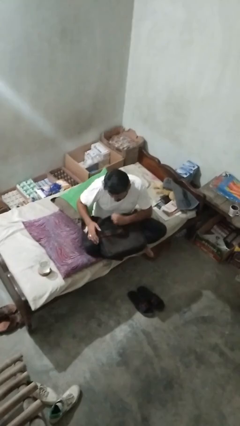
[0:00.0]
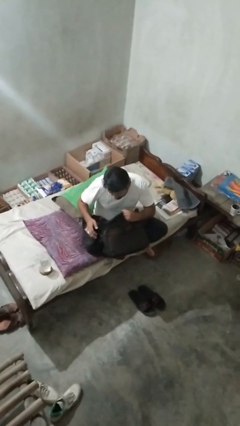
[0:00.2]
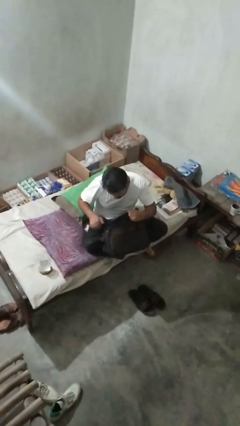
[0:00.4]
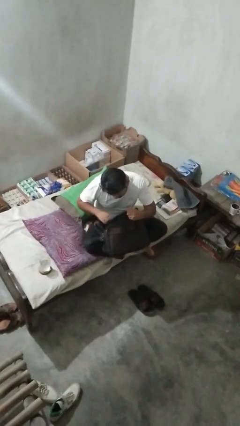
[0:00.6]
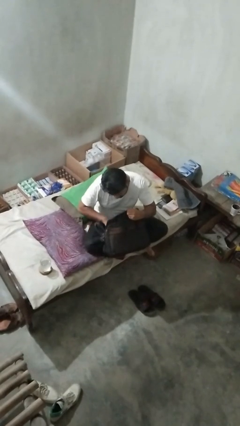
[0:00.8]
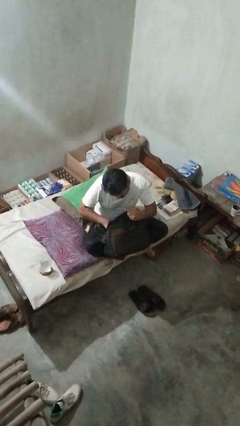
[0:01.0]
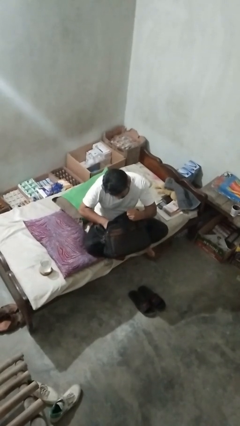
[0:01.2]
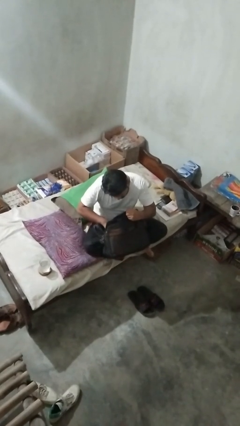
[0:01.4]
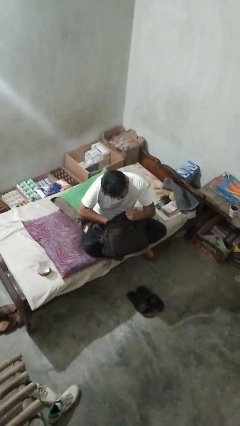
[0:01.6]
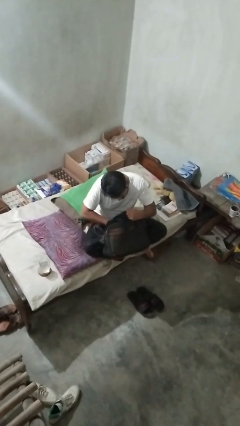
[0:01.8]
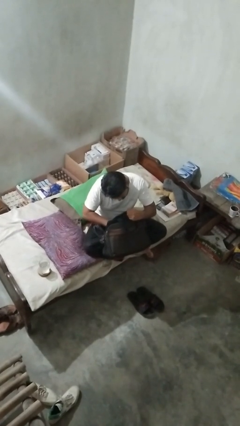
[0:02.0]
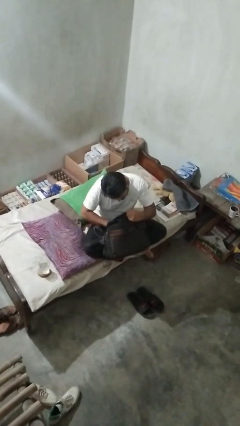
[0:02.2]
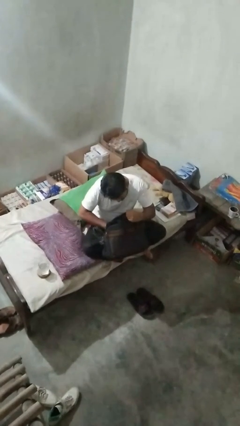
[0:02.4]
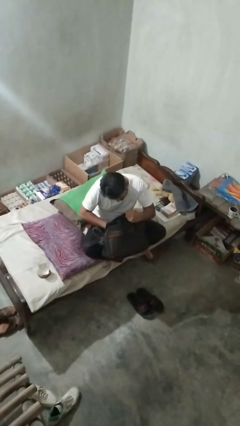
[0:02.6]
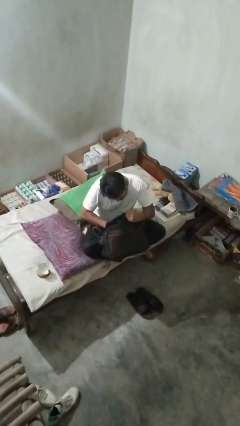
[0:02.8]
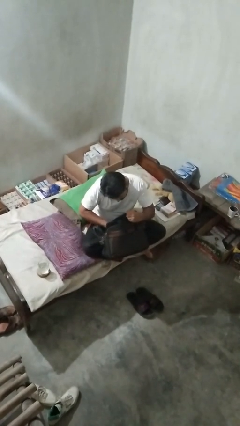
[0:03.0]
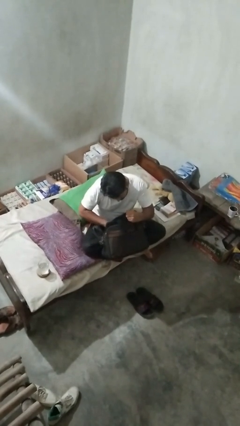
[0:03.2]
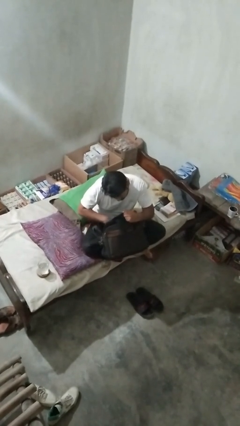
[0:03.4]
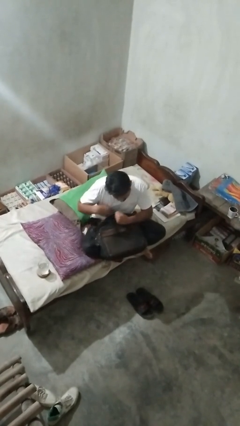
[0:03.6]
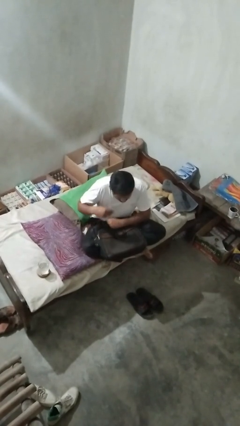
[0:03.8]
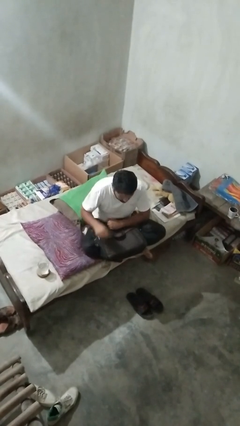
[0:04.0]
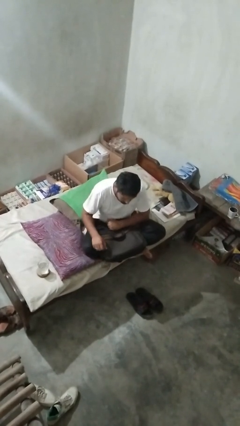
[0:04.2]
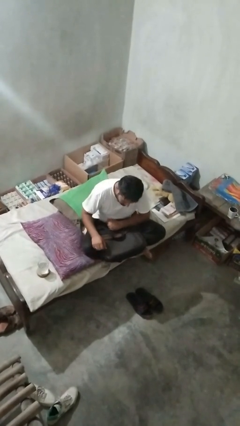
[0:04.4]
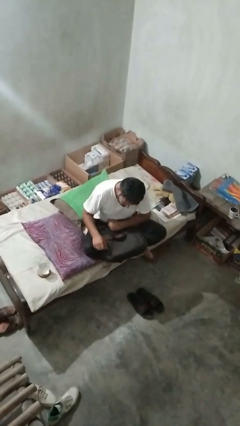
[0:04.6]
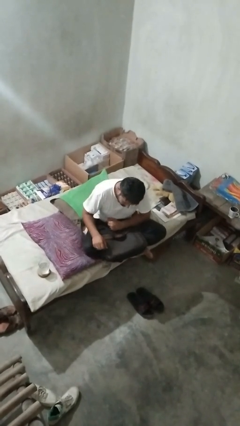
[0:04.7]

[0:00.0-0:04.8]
person searches in bag

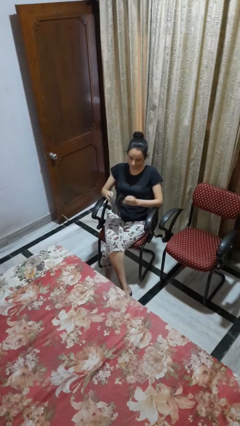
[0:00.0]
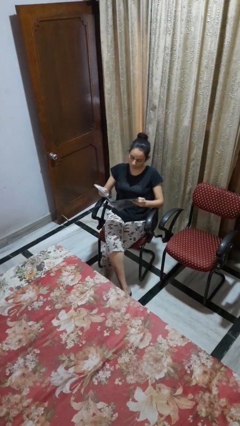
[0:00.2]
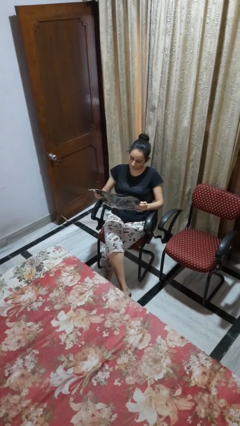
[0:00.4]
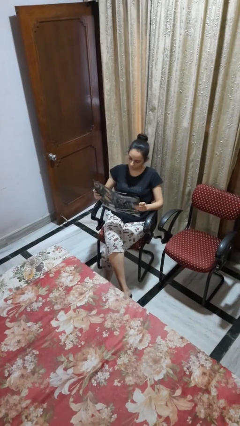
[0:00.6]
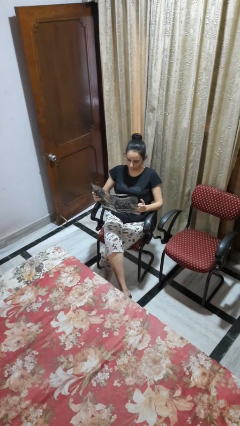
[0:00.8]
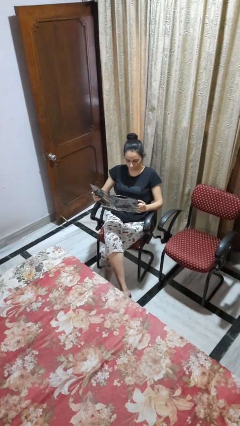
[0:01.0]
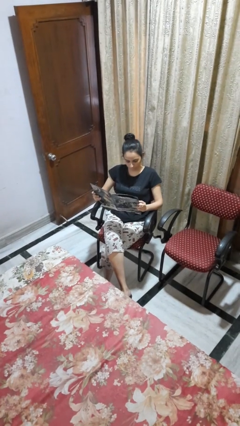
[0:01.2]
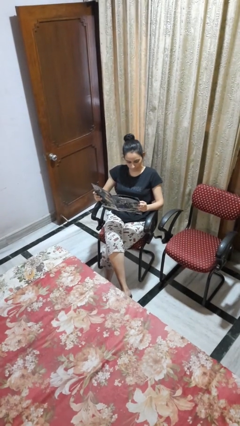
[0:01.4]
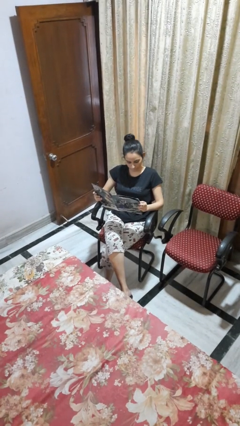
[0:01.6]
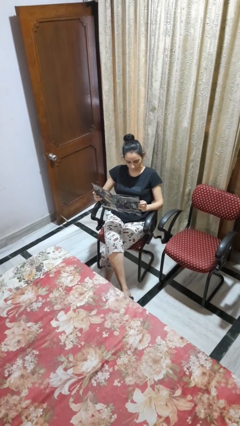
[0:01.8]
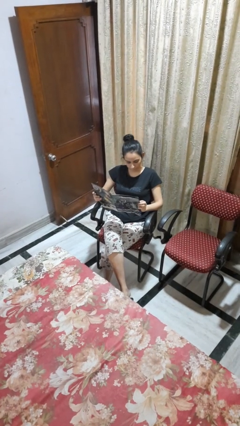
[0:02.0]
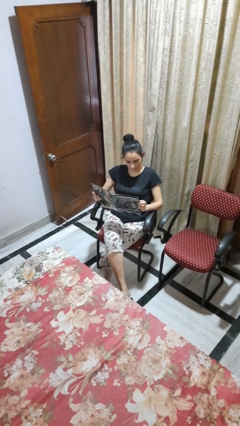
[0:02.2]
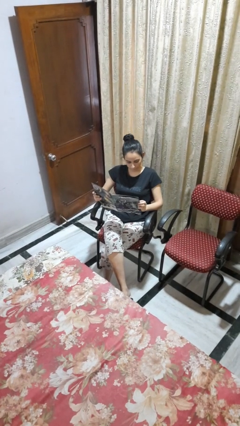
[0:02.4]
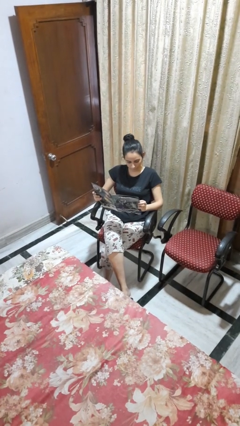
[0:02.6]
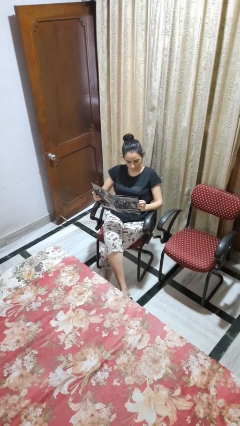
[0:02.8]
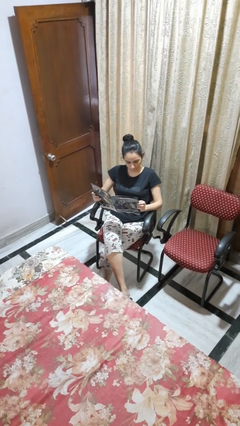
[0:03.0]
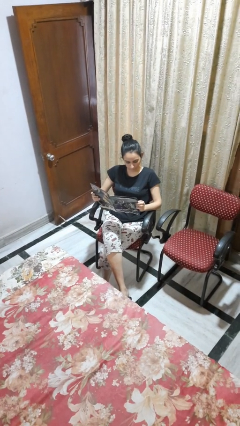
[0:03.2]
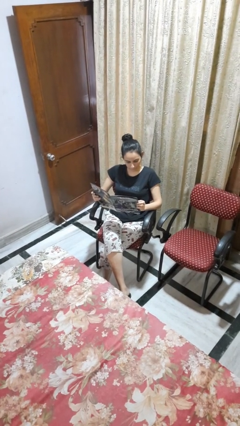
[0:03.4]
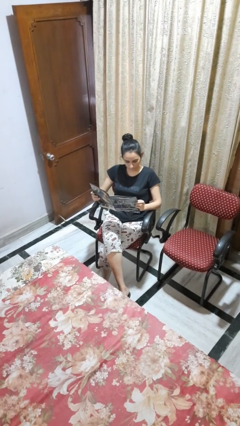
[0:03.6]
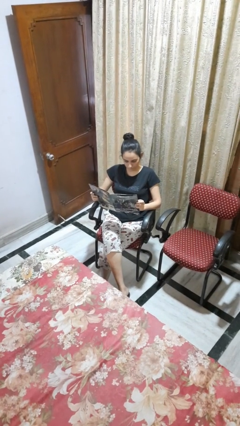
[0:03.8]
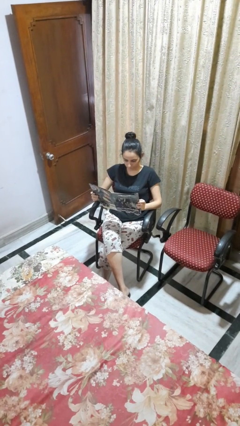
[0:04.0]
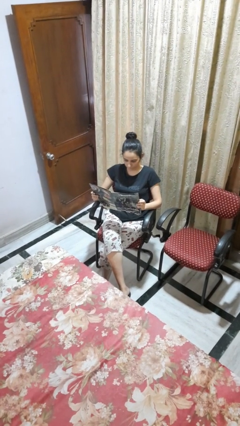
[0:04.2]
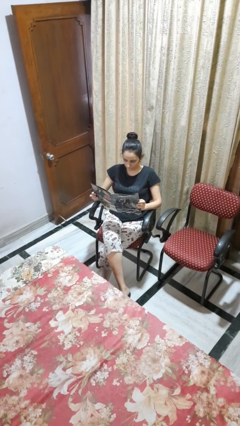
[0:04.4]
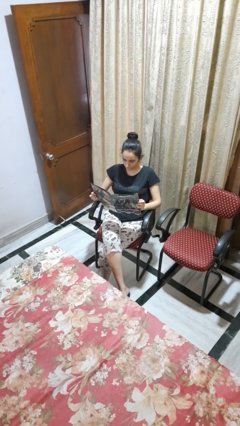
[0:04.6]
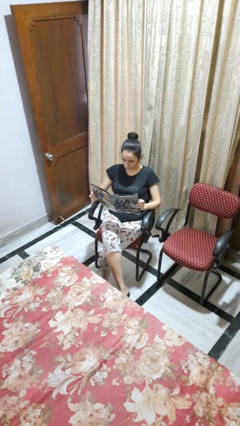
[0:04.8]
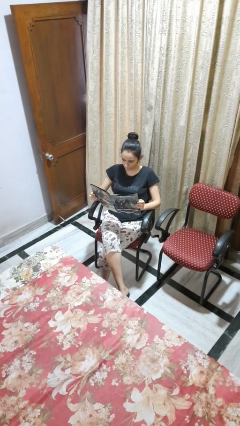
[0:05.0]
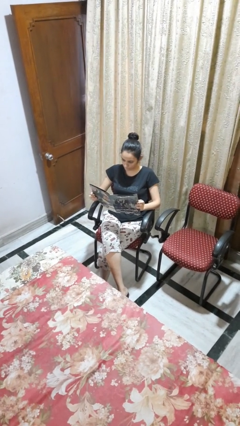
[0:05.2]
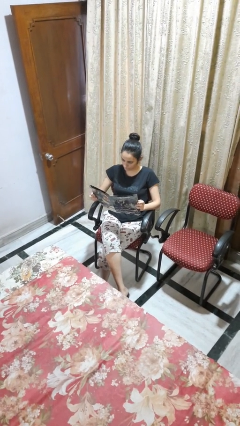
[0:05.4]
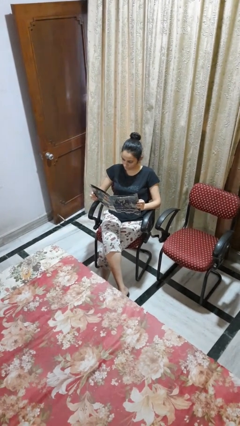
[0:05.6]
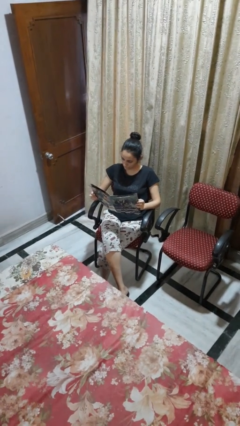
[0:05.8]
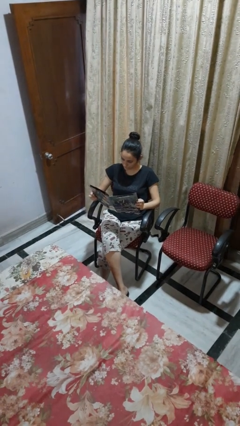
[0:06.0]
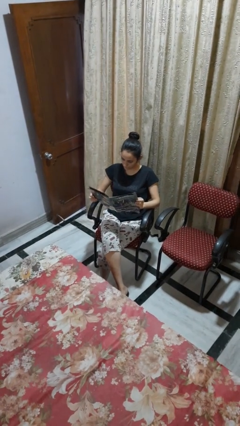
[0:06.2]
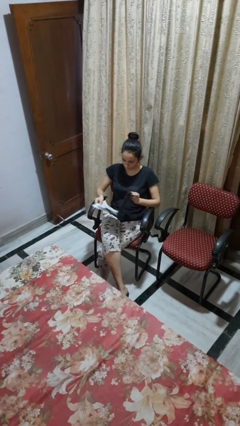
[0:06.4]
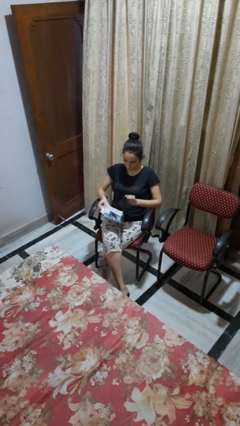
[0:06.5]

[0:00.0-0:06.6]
person reads magazine

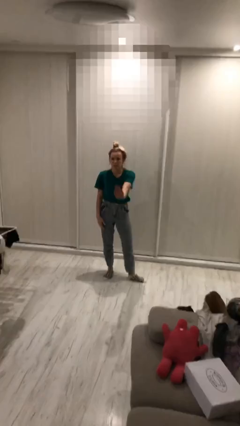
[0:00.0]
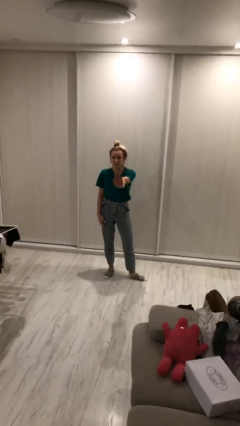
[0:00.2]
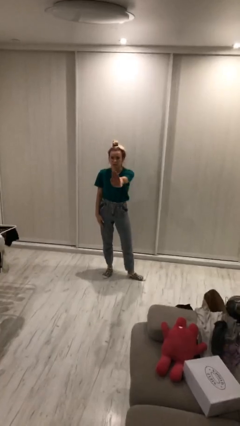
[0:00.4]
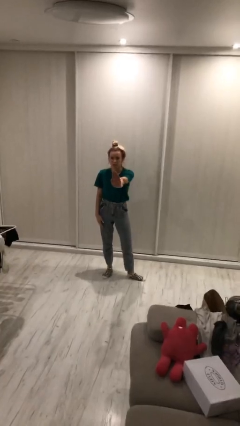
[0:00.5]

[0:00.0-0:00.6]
person gestures stop

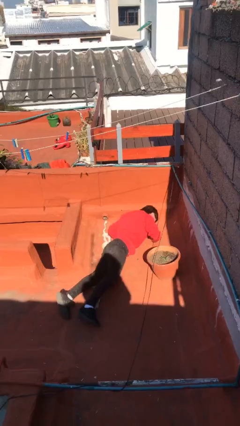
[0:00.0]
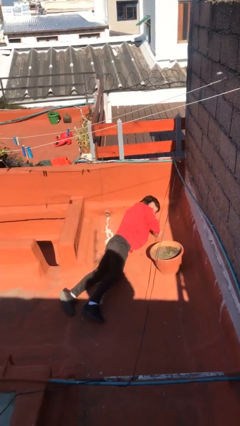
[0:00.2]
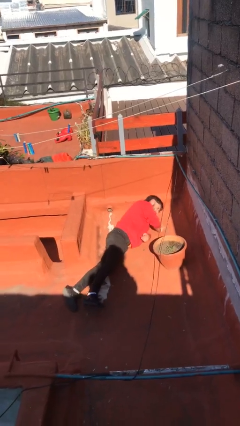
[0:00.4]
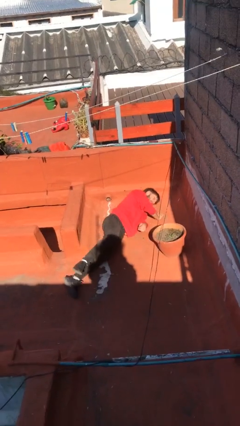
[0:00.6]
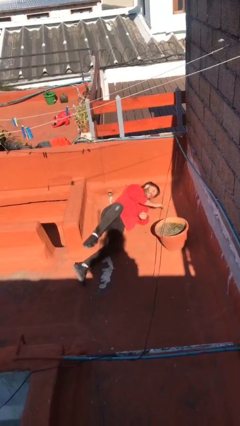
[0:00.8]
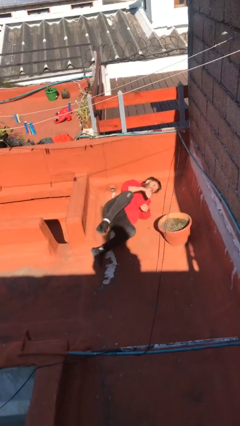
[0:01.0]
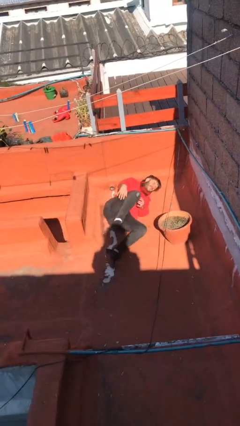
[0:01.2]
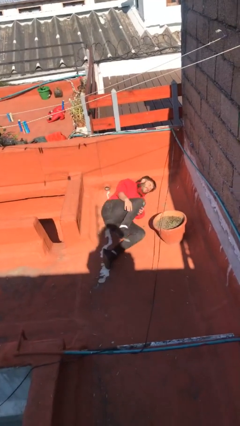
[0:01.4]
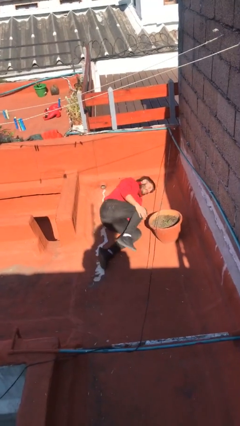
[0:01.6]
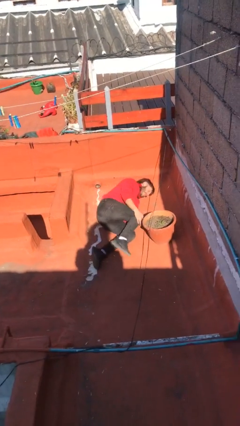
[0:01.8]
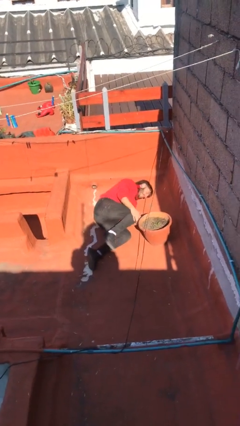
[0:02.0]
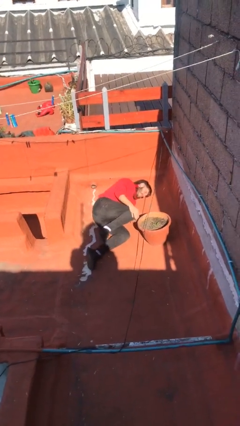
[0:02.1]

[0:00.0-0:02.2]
person lies down on floor

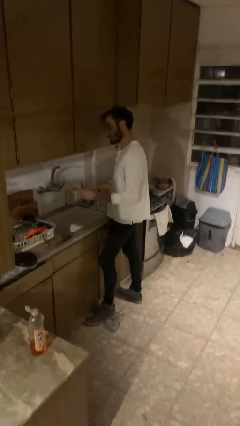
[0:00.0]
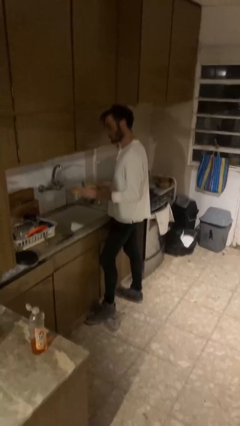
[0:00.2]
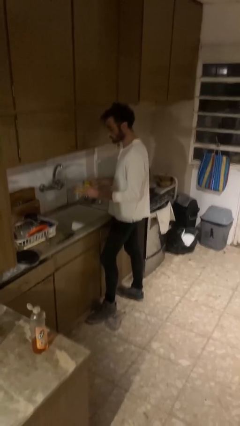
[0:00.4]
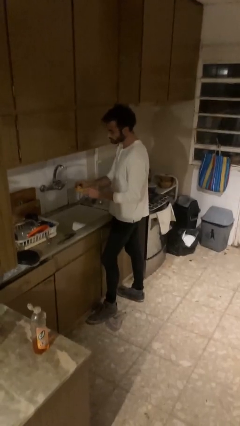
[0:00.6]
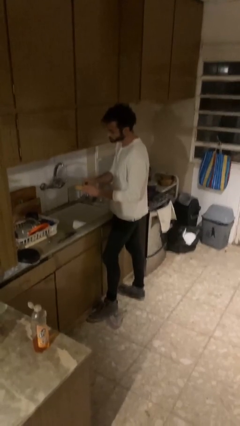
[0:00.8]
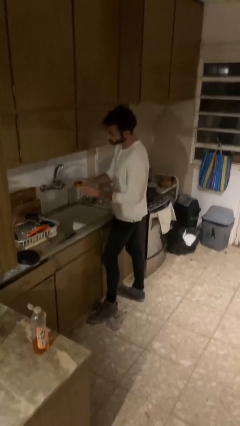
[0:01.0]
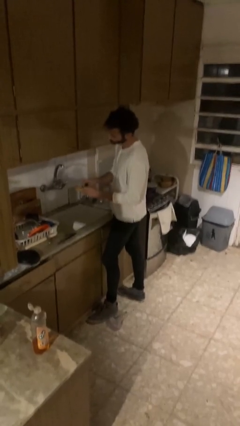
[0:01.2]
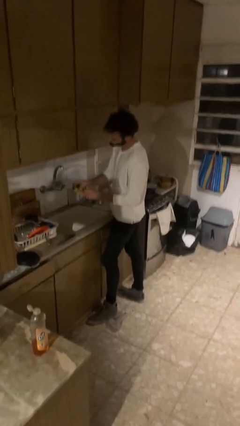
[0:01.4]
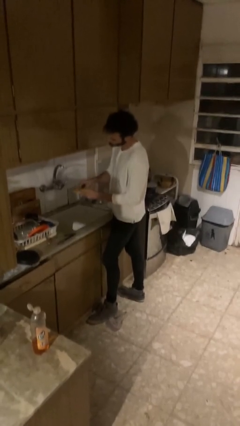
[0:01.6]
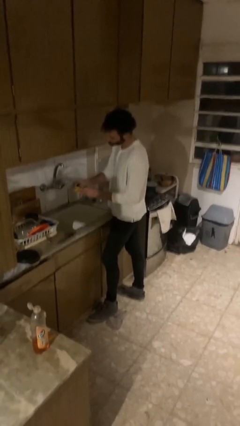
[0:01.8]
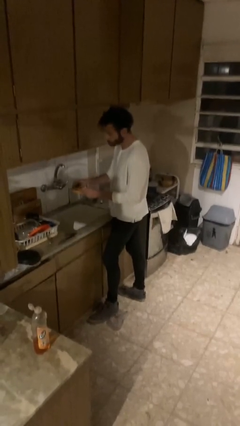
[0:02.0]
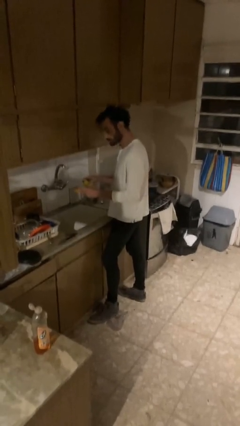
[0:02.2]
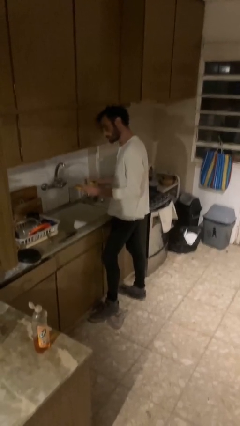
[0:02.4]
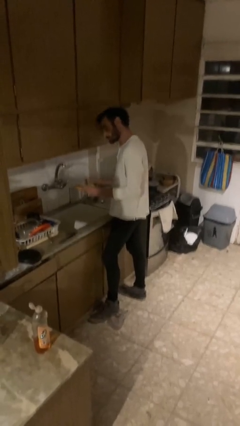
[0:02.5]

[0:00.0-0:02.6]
person washes dish

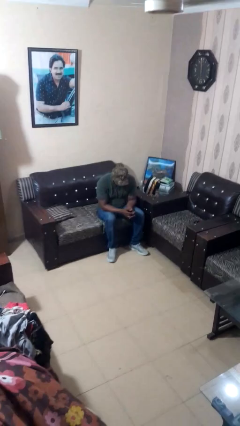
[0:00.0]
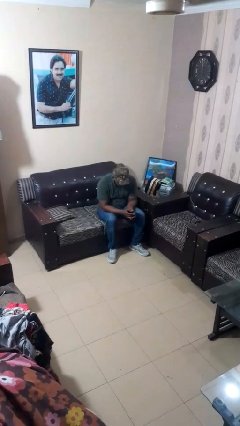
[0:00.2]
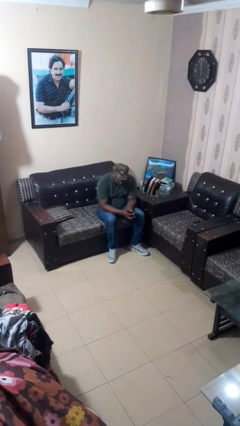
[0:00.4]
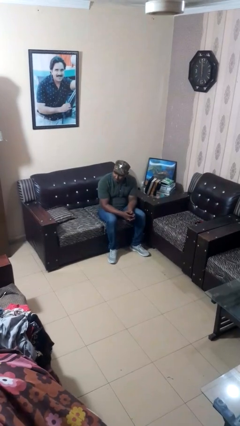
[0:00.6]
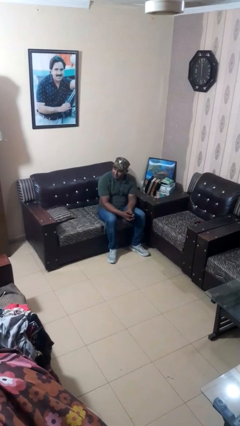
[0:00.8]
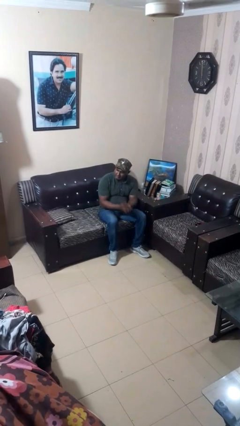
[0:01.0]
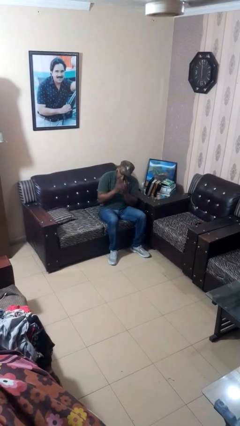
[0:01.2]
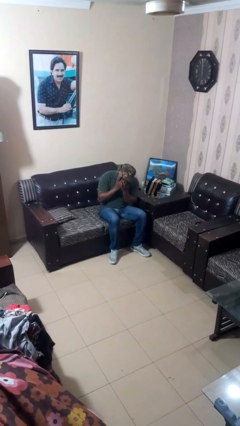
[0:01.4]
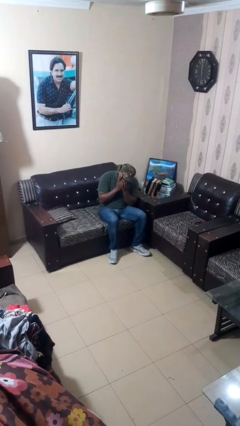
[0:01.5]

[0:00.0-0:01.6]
person sneezes into hand
